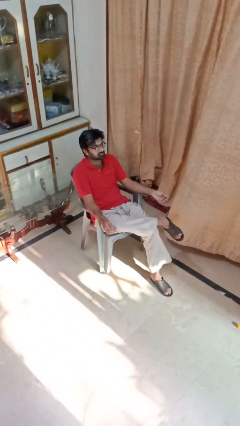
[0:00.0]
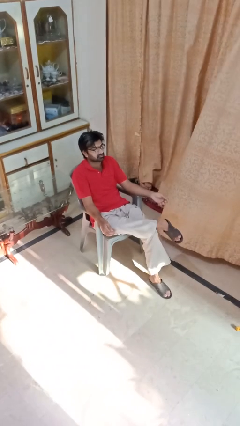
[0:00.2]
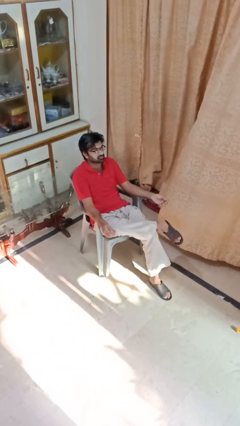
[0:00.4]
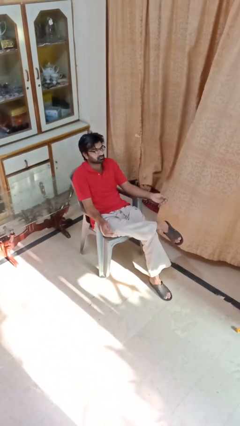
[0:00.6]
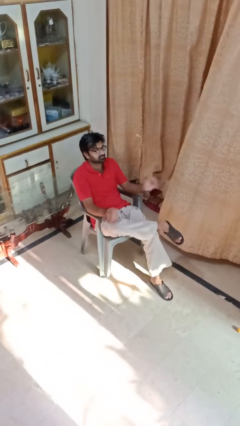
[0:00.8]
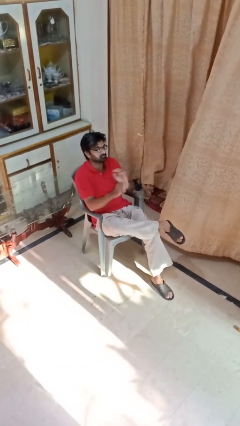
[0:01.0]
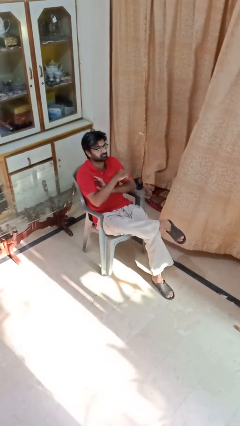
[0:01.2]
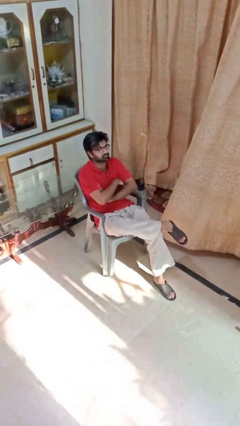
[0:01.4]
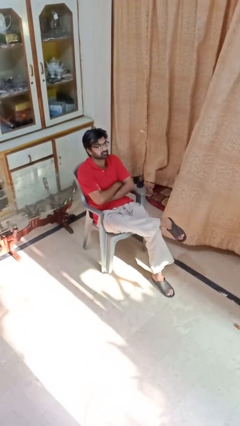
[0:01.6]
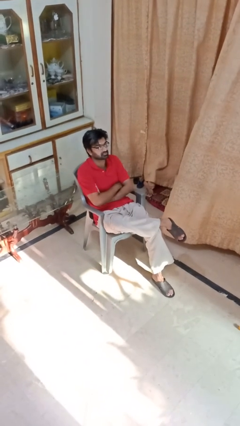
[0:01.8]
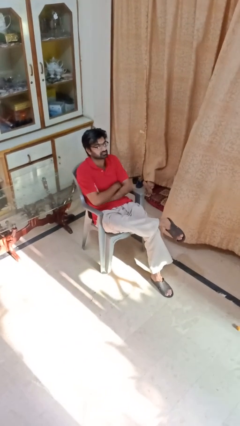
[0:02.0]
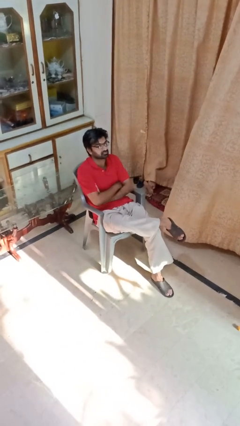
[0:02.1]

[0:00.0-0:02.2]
person crosses arms

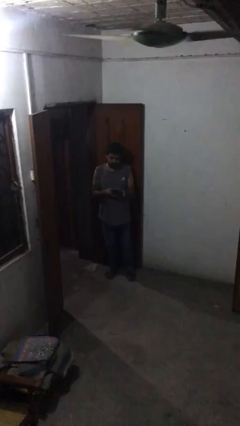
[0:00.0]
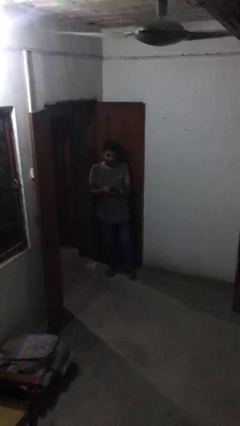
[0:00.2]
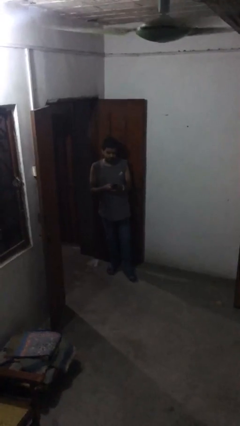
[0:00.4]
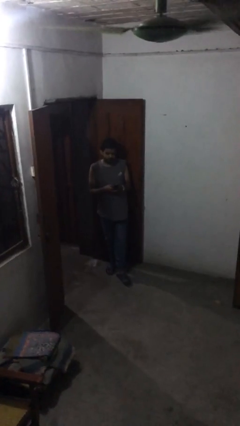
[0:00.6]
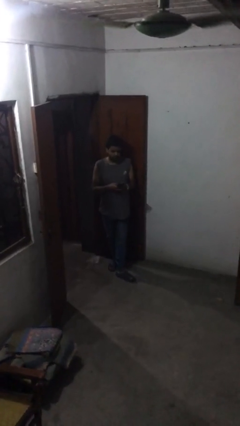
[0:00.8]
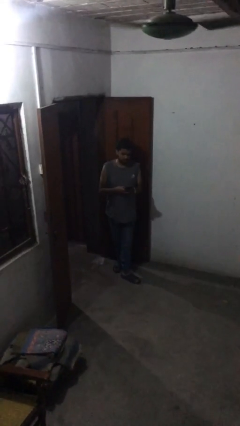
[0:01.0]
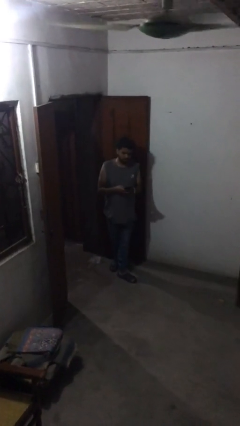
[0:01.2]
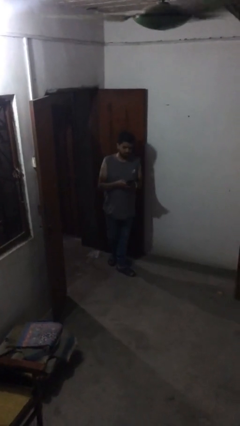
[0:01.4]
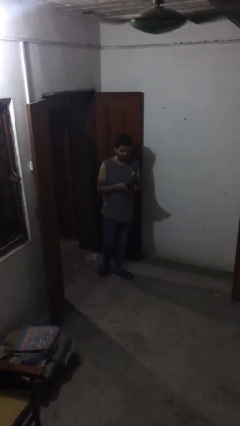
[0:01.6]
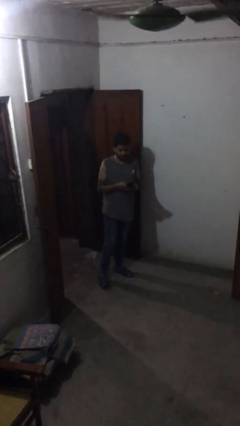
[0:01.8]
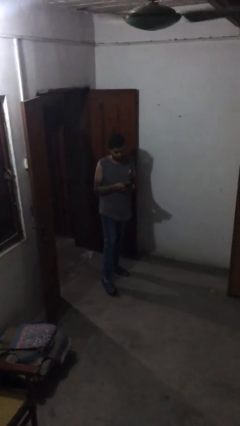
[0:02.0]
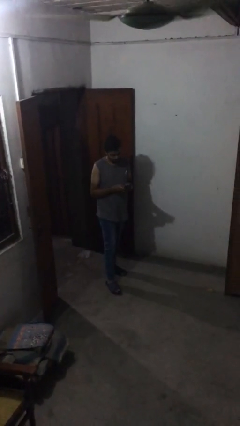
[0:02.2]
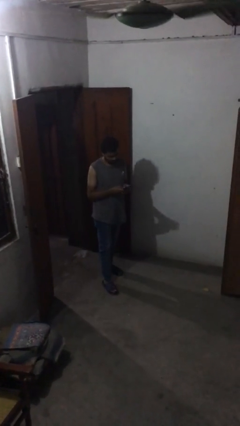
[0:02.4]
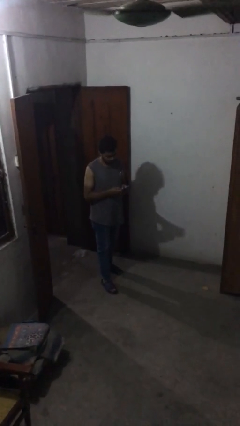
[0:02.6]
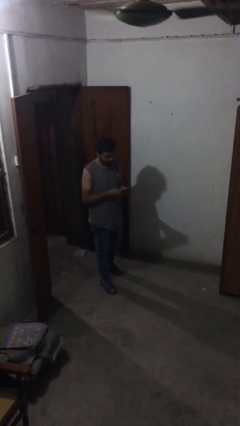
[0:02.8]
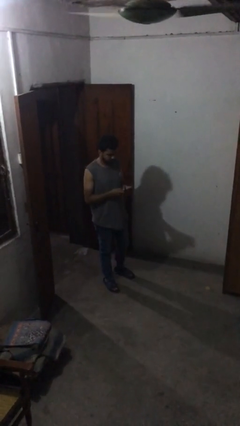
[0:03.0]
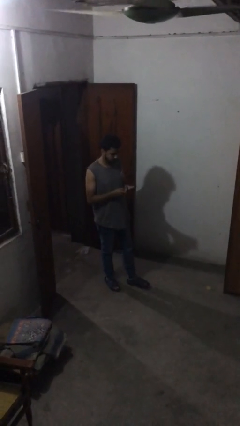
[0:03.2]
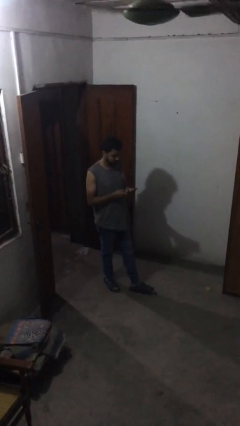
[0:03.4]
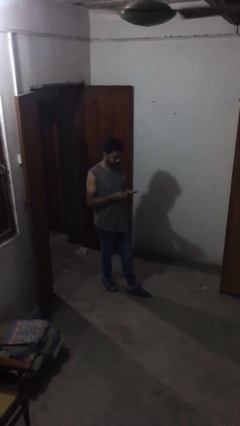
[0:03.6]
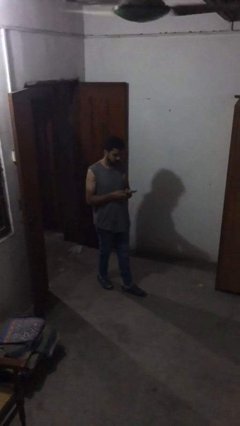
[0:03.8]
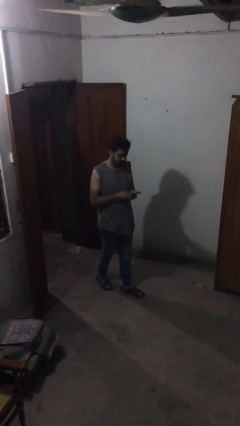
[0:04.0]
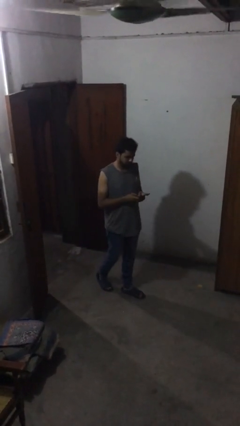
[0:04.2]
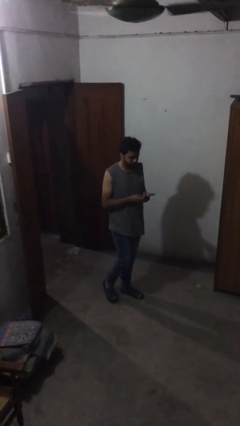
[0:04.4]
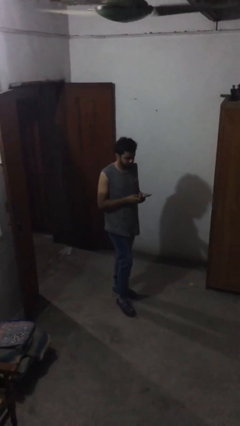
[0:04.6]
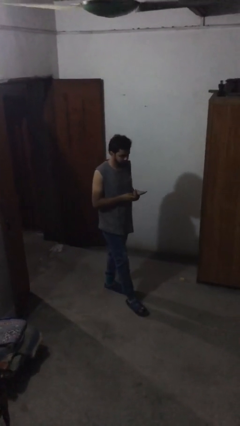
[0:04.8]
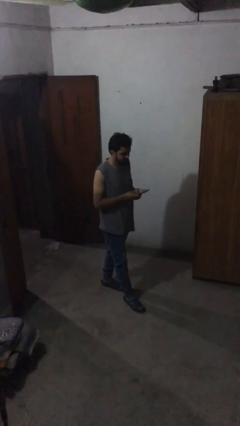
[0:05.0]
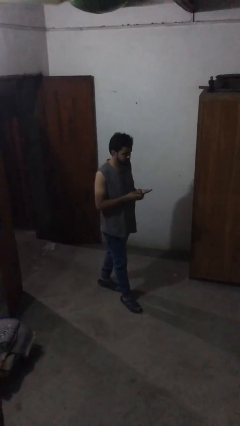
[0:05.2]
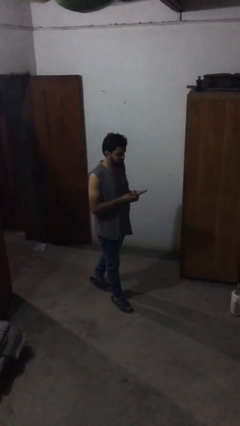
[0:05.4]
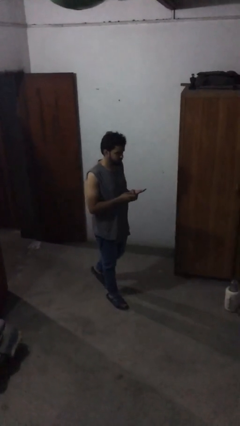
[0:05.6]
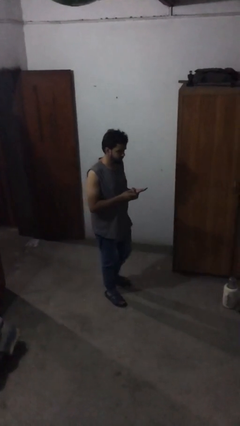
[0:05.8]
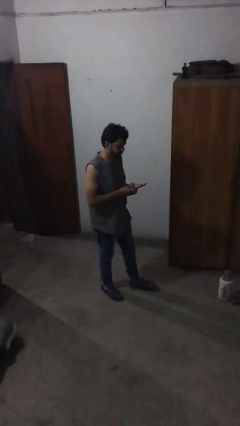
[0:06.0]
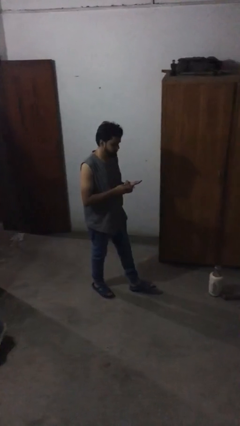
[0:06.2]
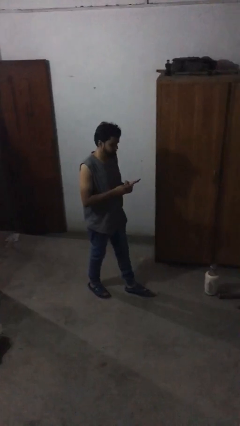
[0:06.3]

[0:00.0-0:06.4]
person texts on phone

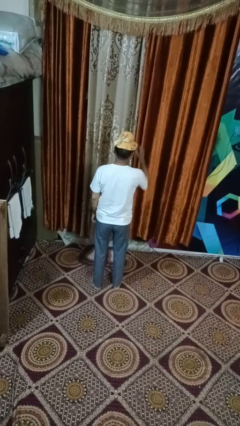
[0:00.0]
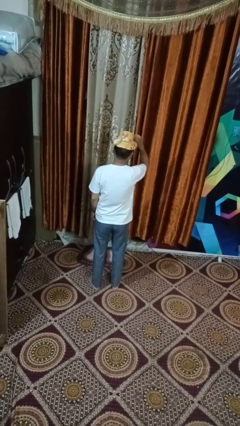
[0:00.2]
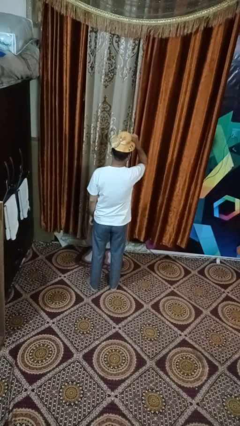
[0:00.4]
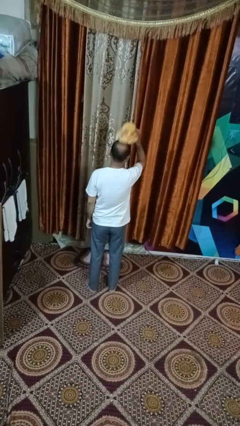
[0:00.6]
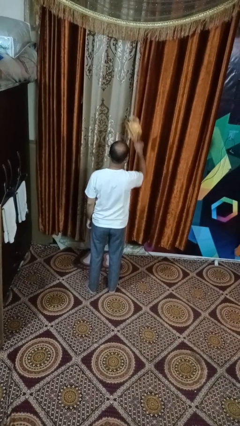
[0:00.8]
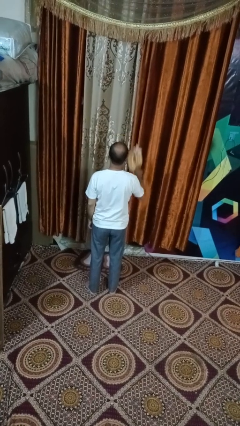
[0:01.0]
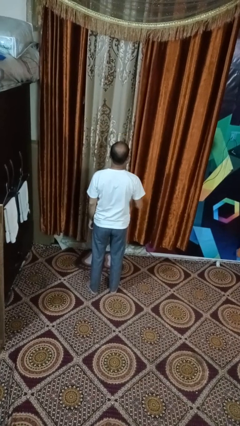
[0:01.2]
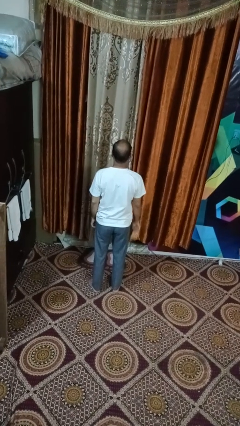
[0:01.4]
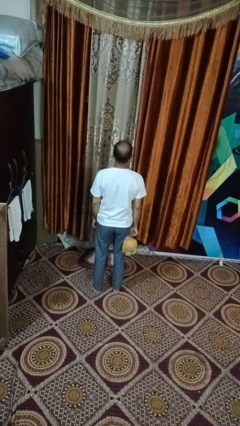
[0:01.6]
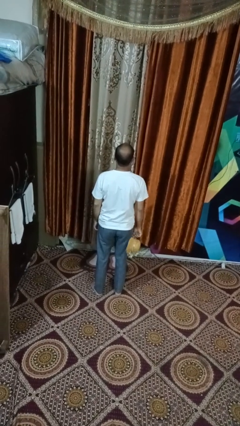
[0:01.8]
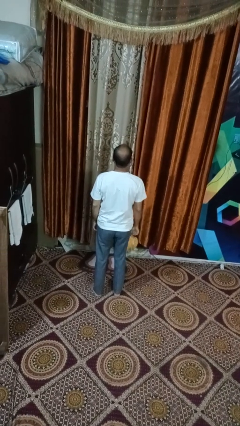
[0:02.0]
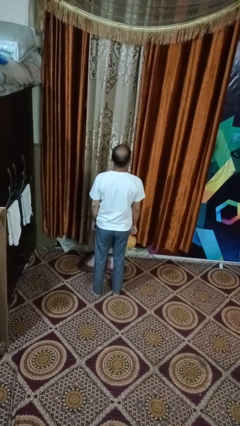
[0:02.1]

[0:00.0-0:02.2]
person takes off hat

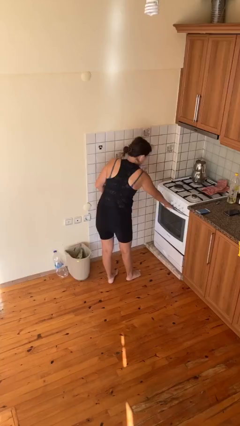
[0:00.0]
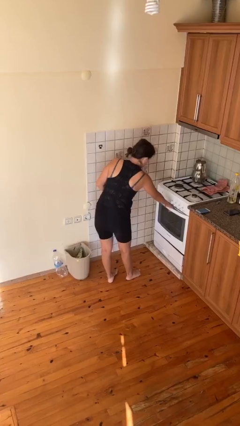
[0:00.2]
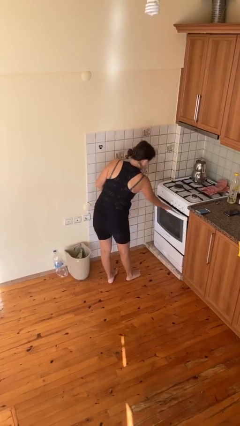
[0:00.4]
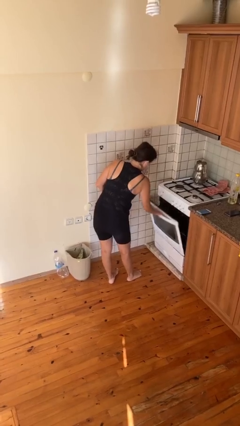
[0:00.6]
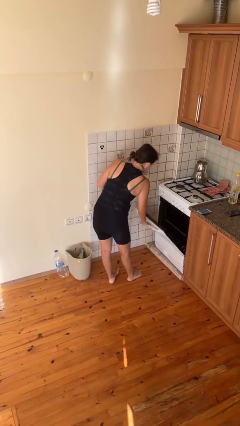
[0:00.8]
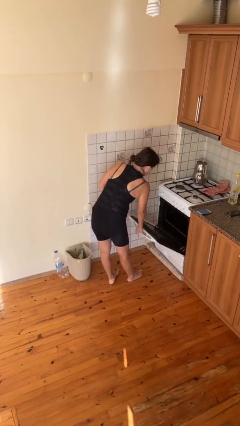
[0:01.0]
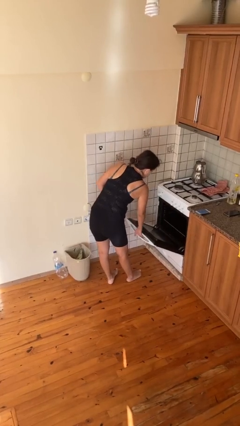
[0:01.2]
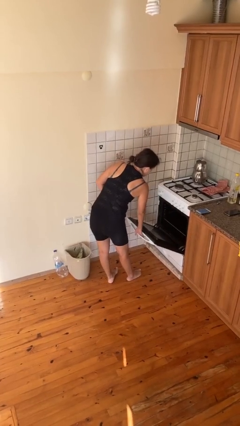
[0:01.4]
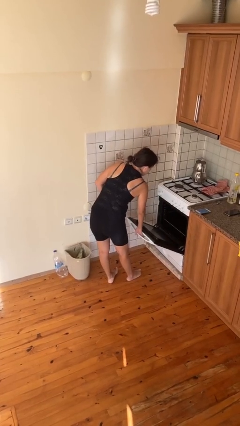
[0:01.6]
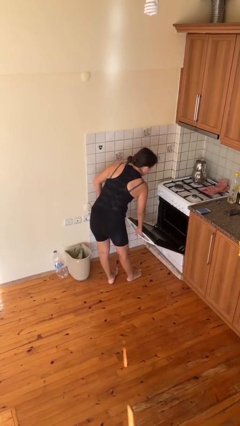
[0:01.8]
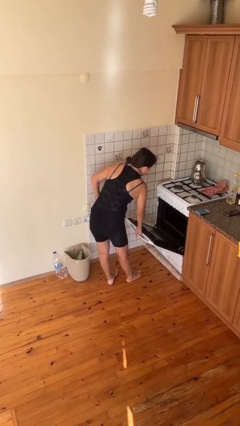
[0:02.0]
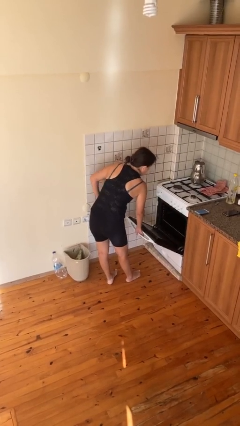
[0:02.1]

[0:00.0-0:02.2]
person opens oven door

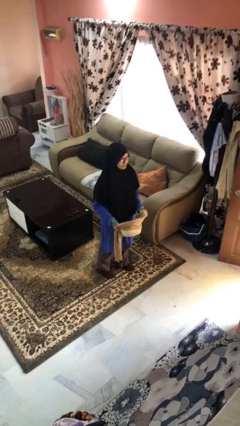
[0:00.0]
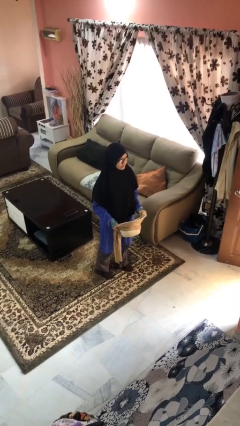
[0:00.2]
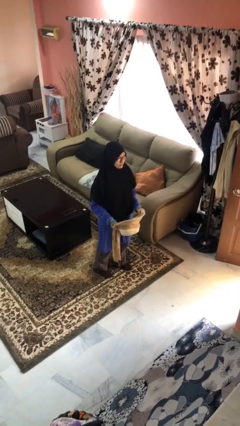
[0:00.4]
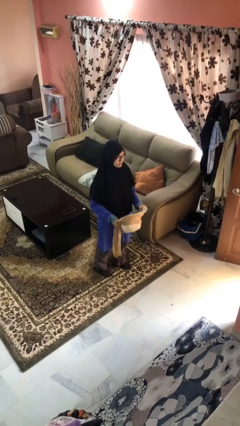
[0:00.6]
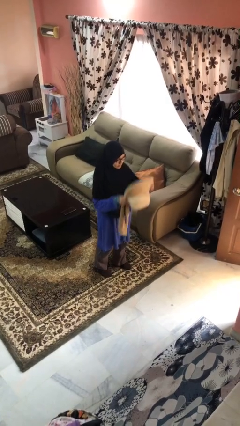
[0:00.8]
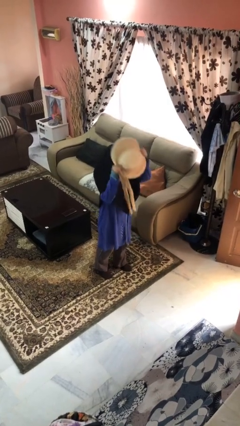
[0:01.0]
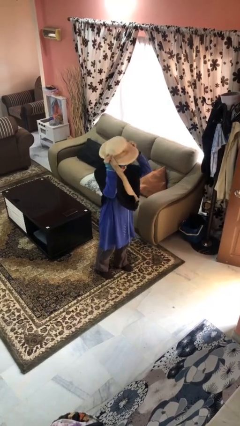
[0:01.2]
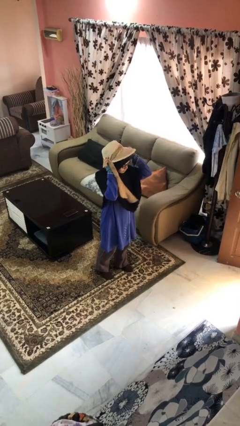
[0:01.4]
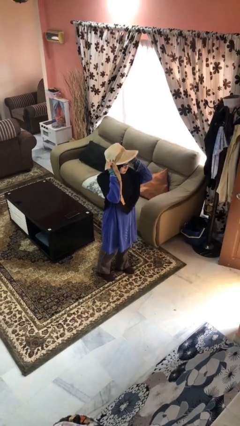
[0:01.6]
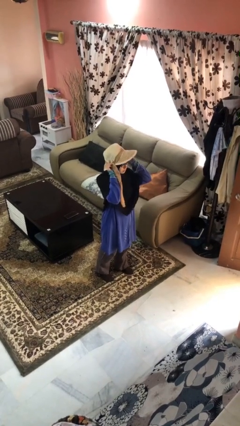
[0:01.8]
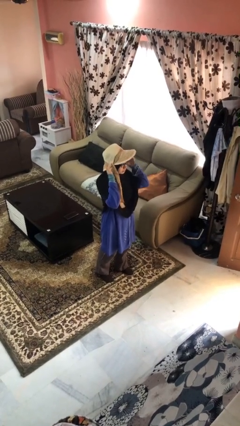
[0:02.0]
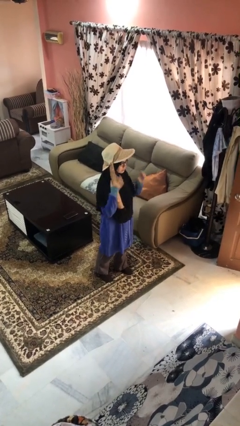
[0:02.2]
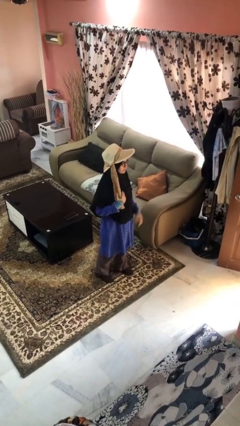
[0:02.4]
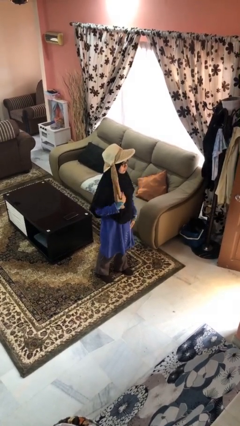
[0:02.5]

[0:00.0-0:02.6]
person puts on hat

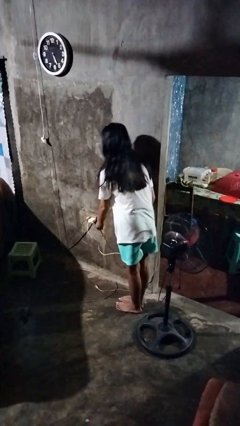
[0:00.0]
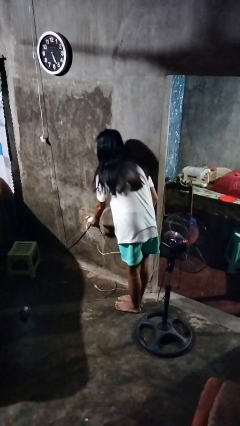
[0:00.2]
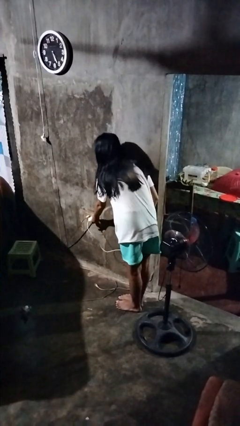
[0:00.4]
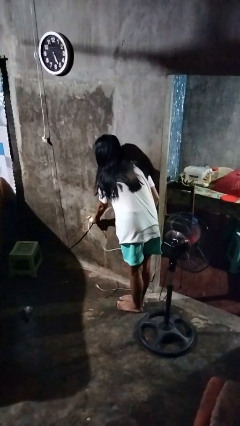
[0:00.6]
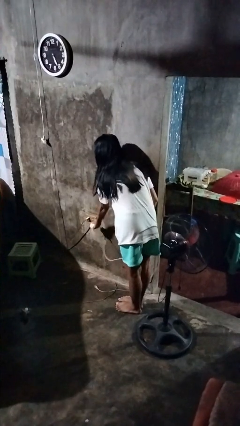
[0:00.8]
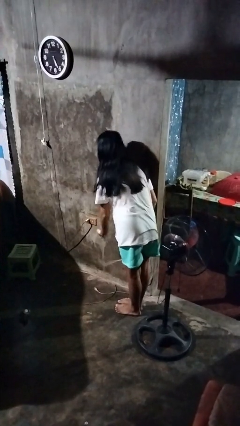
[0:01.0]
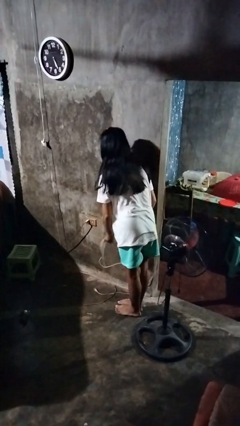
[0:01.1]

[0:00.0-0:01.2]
person unplugs from electrical socket
